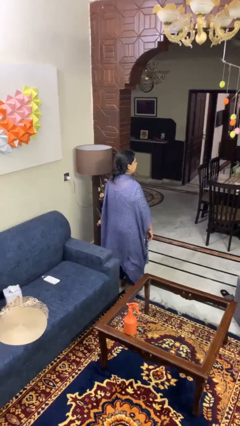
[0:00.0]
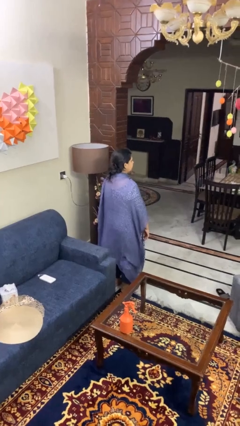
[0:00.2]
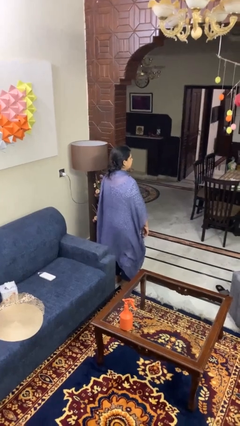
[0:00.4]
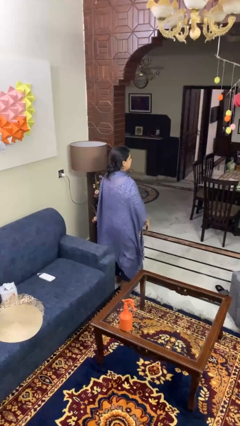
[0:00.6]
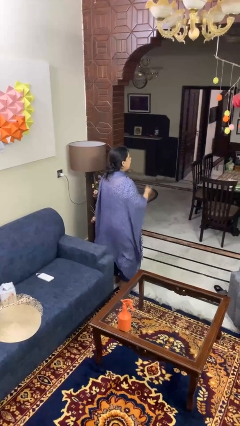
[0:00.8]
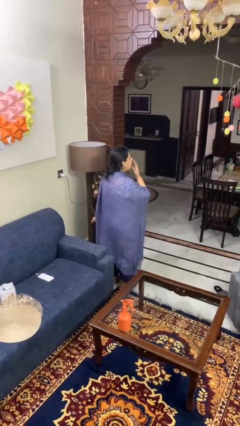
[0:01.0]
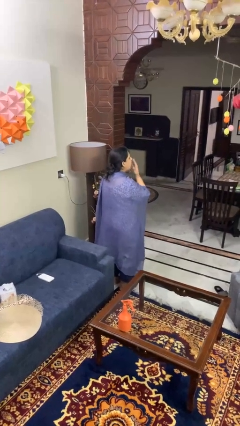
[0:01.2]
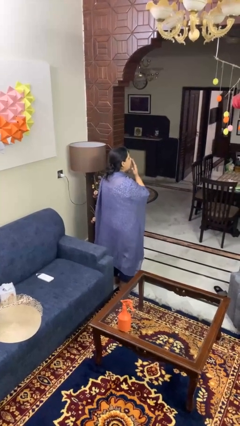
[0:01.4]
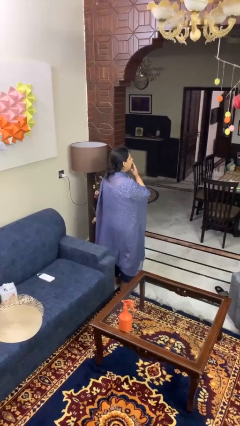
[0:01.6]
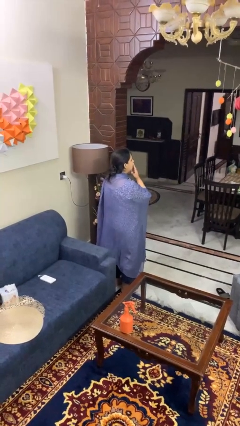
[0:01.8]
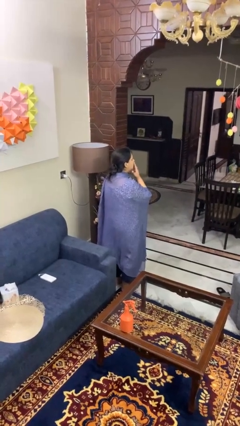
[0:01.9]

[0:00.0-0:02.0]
person yawns

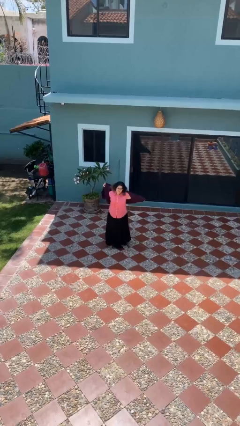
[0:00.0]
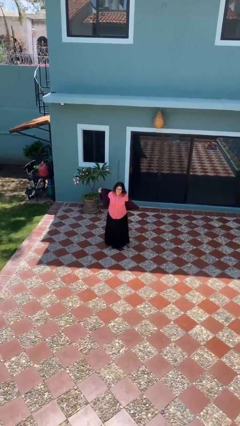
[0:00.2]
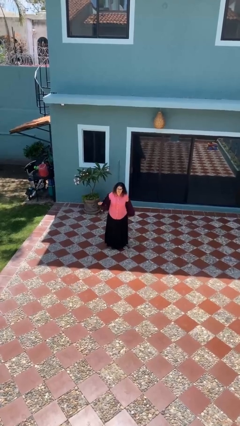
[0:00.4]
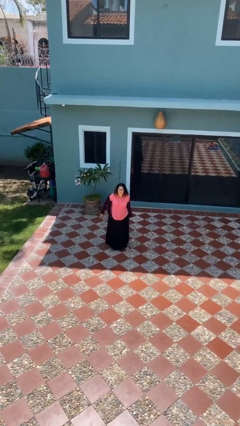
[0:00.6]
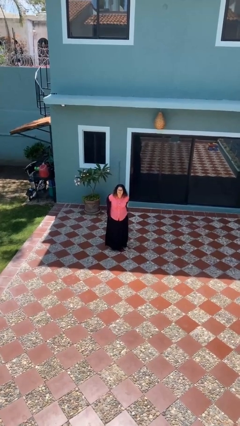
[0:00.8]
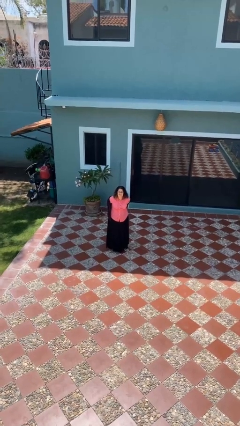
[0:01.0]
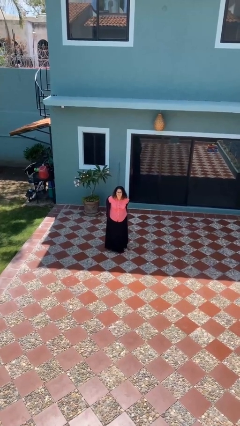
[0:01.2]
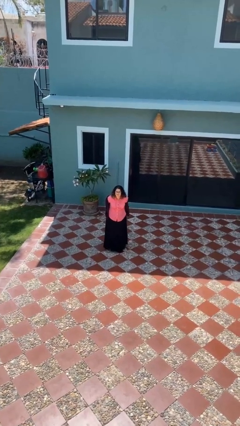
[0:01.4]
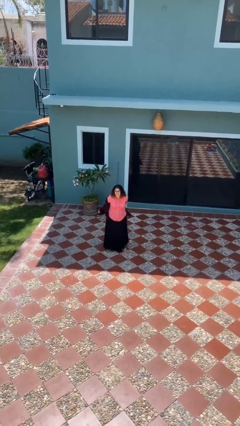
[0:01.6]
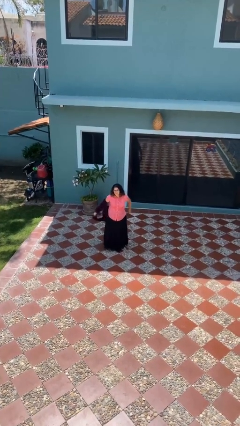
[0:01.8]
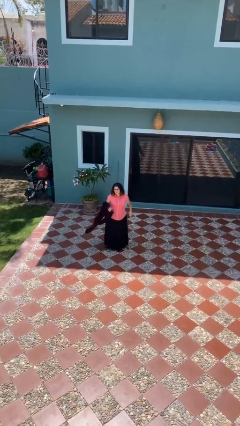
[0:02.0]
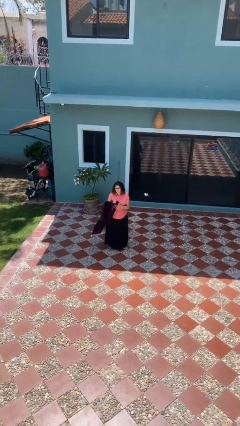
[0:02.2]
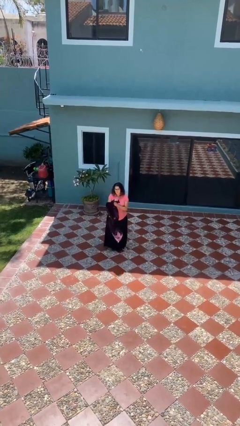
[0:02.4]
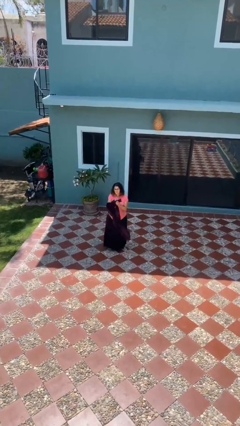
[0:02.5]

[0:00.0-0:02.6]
person takes off jacket

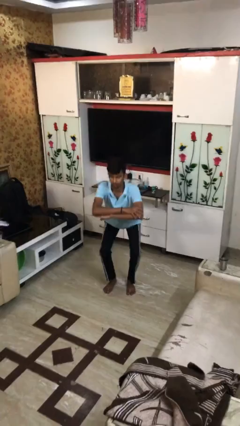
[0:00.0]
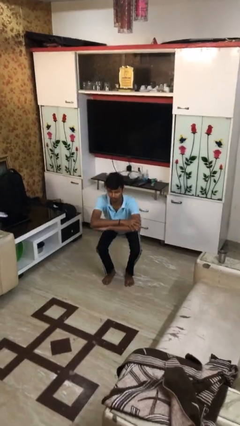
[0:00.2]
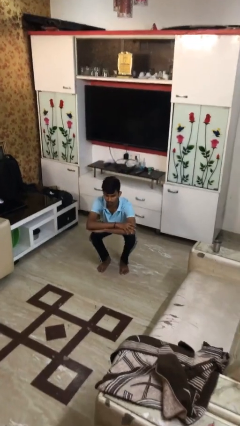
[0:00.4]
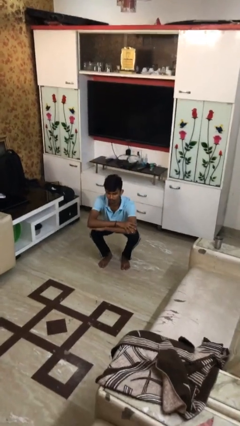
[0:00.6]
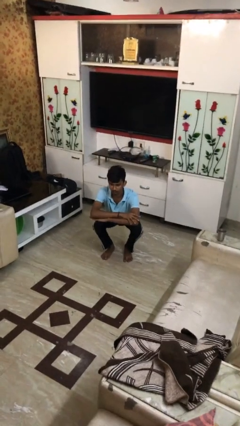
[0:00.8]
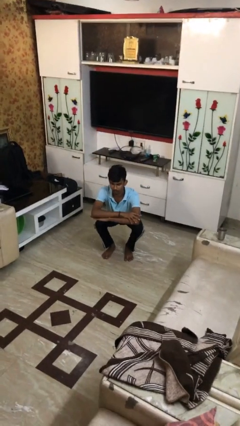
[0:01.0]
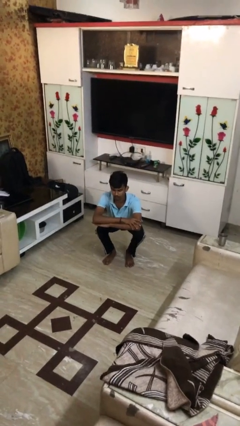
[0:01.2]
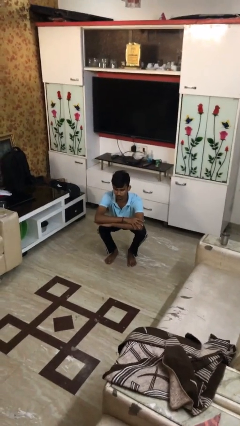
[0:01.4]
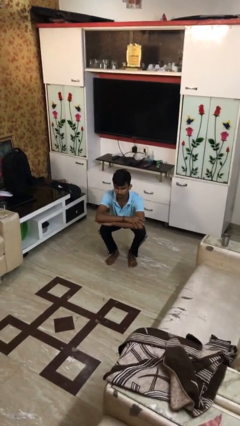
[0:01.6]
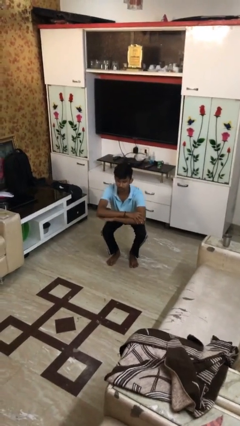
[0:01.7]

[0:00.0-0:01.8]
person squats

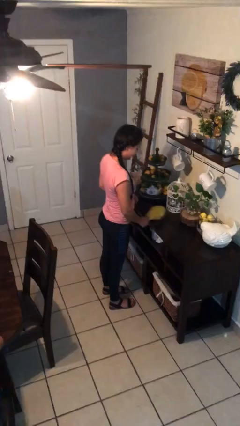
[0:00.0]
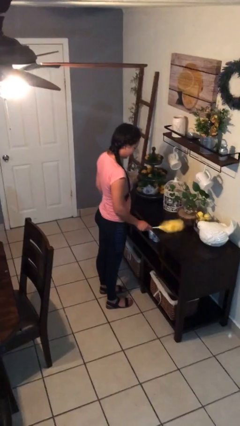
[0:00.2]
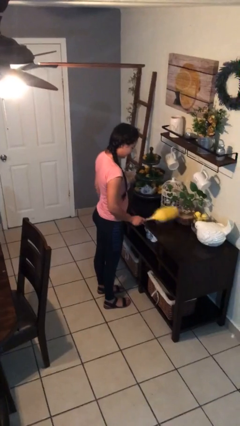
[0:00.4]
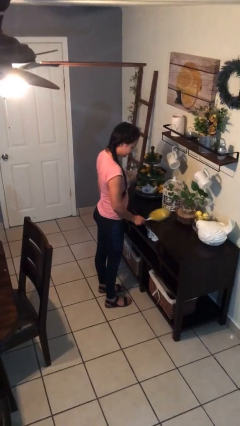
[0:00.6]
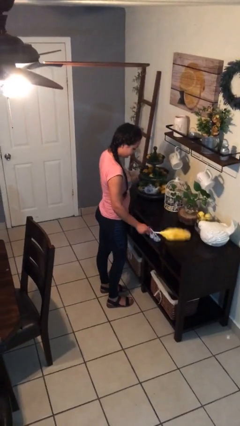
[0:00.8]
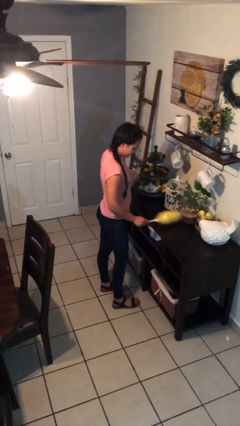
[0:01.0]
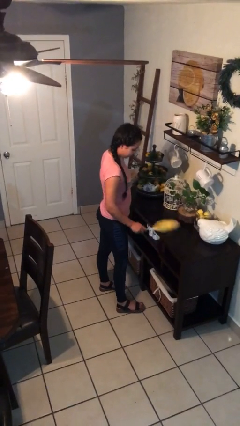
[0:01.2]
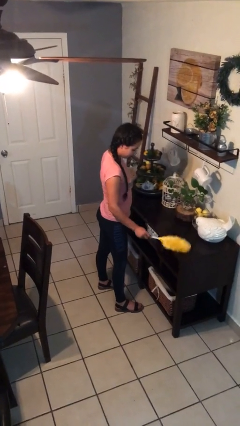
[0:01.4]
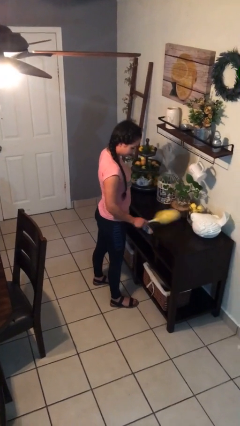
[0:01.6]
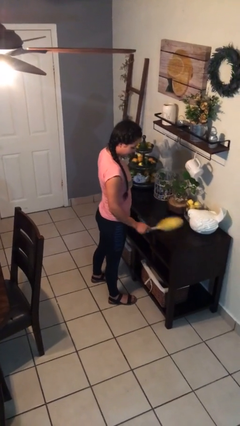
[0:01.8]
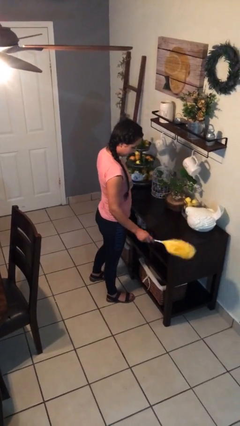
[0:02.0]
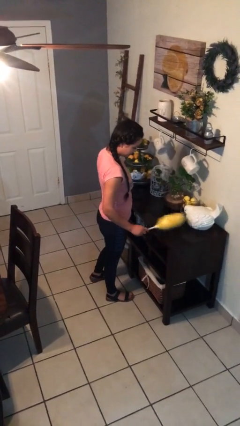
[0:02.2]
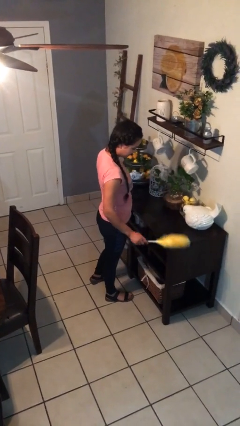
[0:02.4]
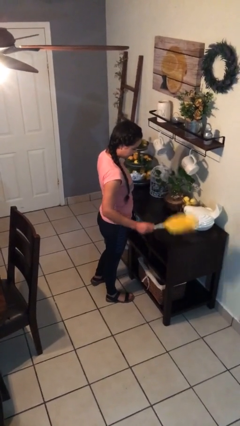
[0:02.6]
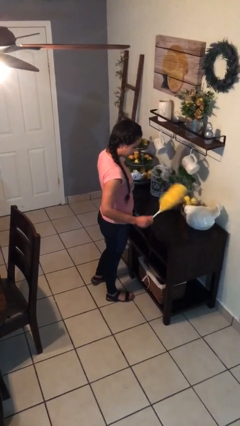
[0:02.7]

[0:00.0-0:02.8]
person dusts furniture

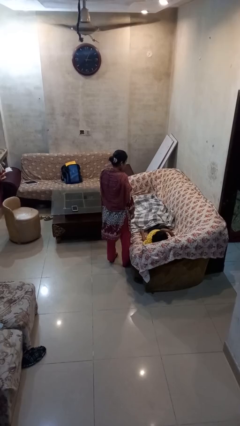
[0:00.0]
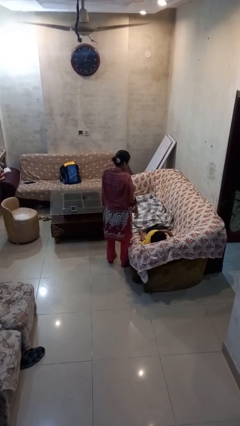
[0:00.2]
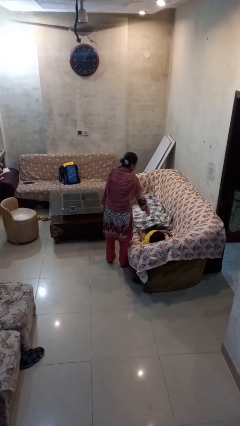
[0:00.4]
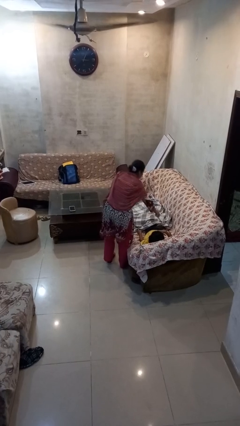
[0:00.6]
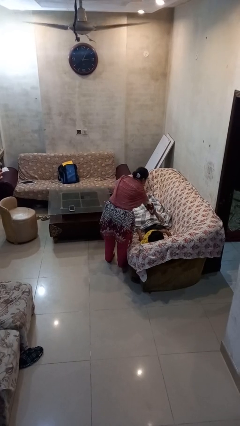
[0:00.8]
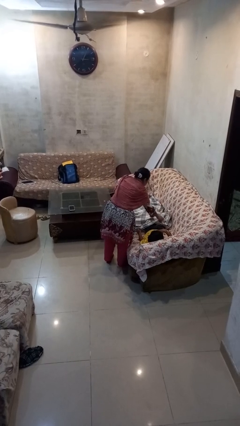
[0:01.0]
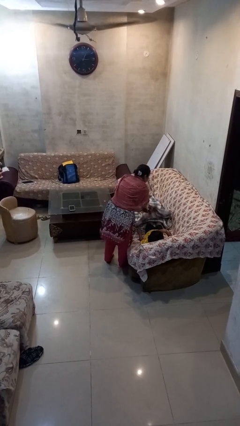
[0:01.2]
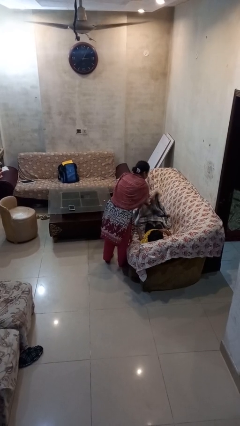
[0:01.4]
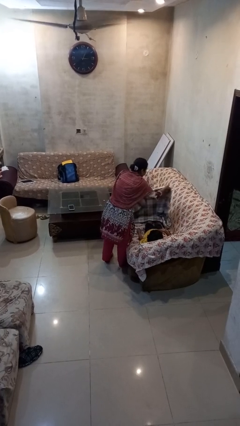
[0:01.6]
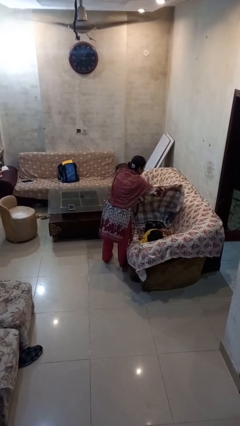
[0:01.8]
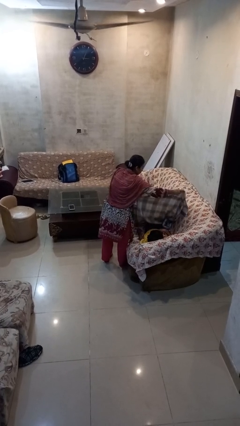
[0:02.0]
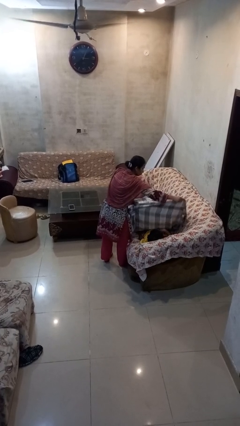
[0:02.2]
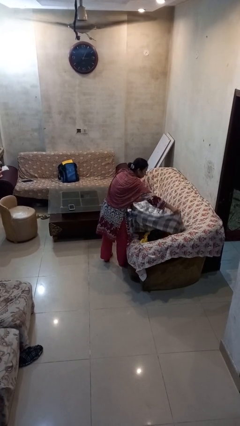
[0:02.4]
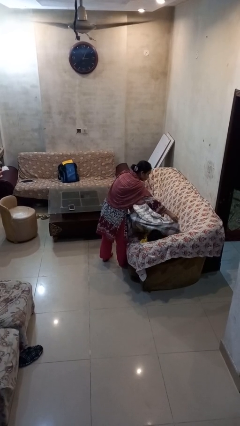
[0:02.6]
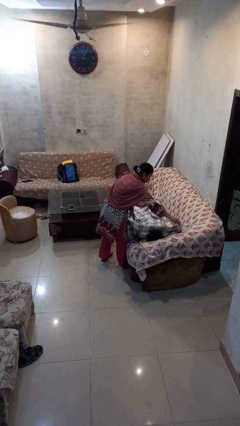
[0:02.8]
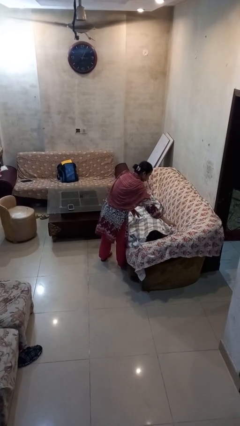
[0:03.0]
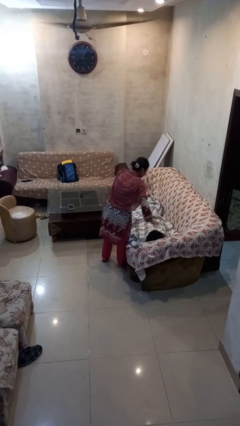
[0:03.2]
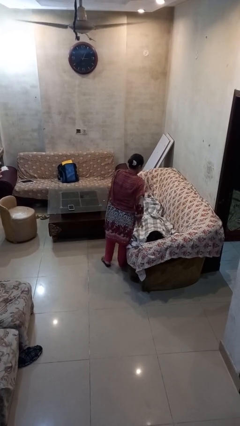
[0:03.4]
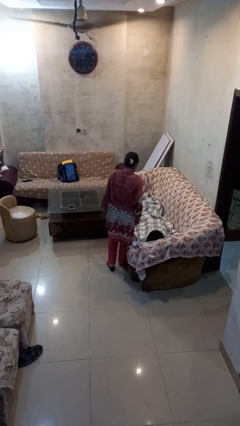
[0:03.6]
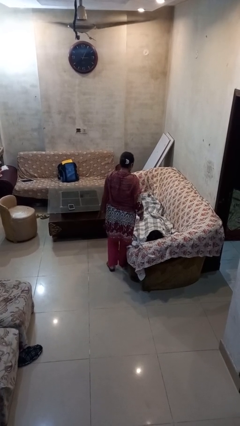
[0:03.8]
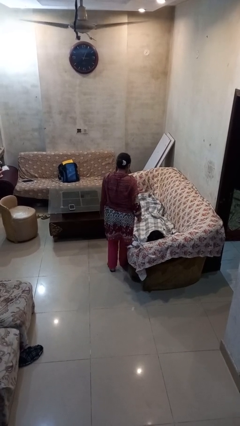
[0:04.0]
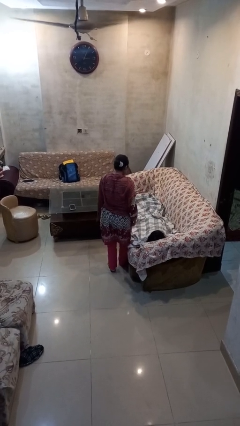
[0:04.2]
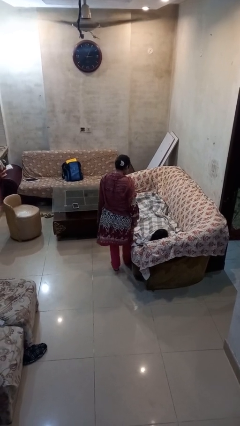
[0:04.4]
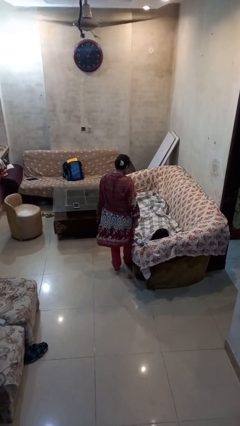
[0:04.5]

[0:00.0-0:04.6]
person covers friend with blanket

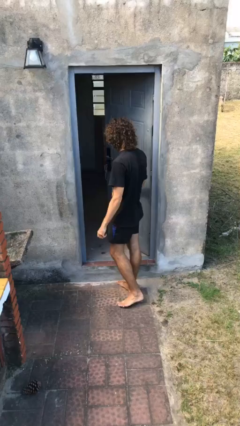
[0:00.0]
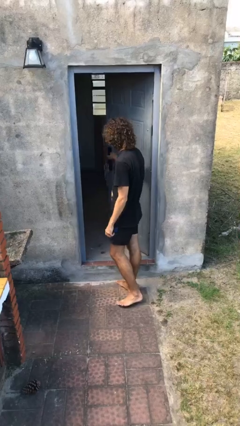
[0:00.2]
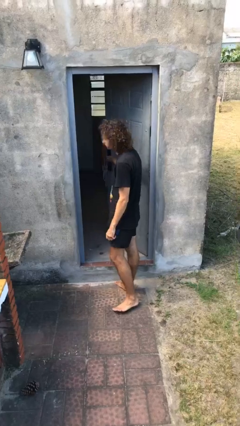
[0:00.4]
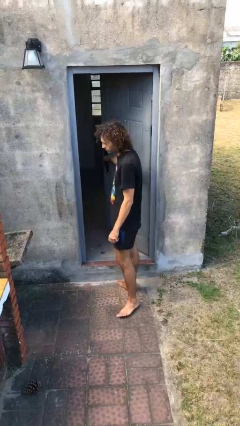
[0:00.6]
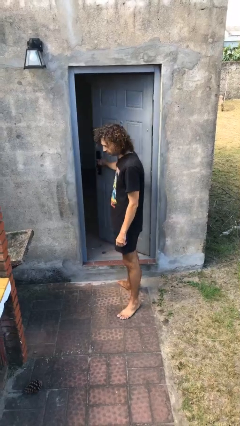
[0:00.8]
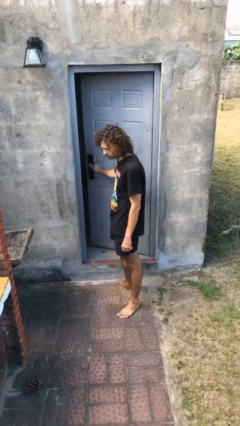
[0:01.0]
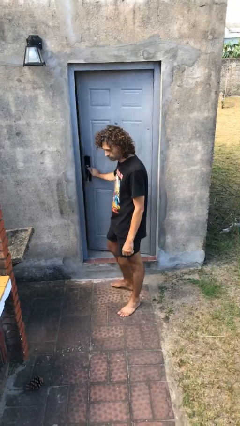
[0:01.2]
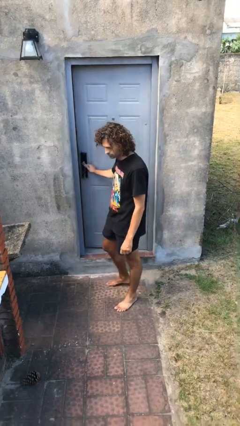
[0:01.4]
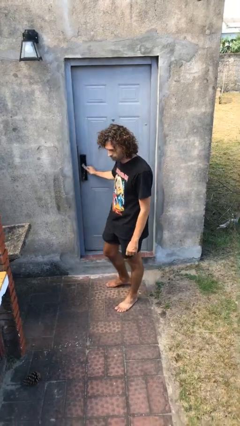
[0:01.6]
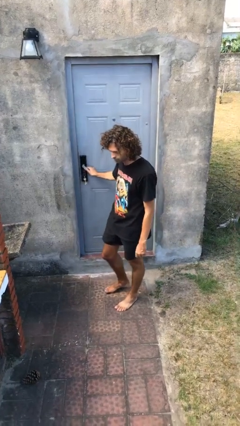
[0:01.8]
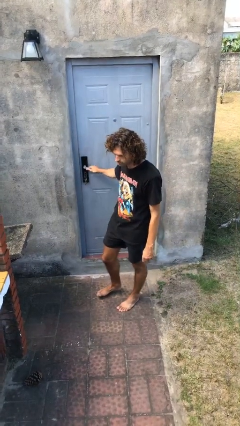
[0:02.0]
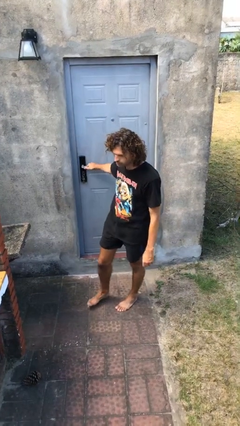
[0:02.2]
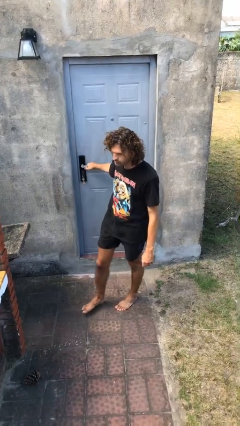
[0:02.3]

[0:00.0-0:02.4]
person closes facility door

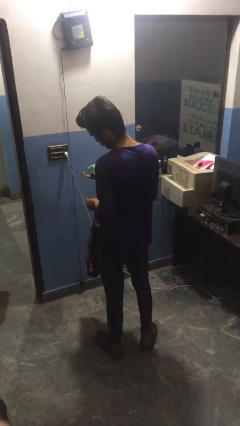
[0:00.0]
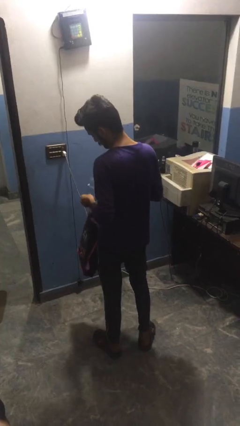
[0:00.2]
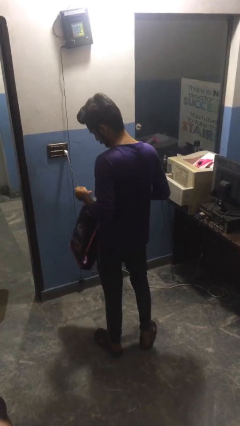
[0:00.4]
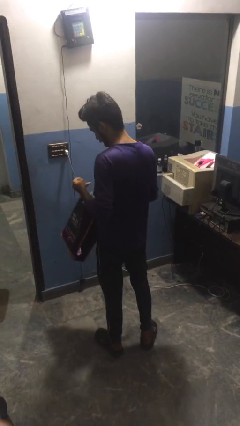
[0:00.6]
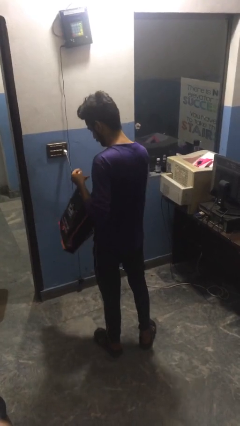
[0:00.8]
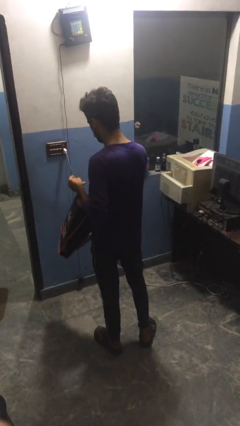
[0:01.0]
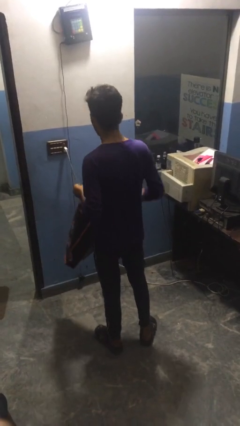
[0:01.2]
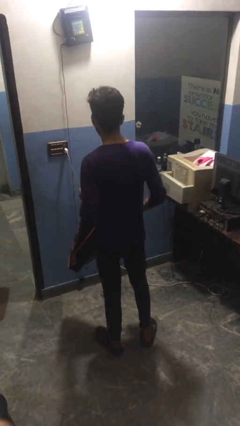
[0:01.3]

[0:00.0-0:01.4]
person puts object into bag
